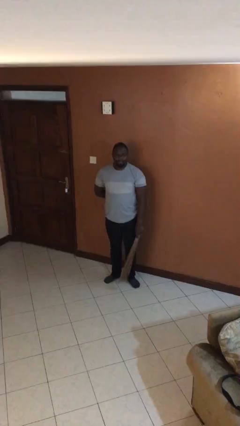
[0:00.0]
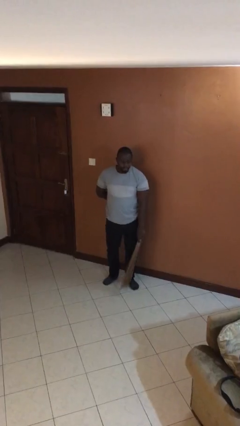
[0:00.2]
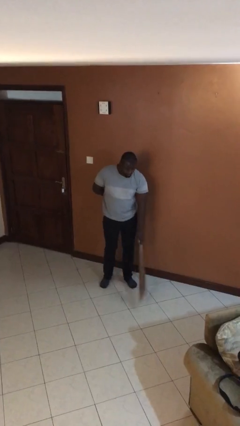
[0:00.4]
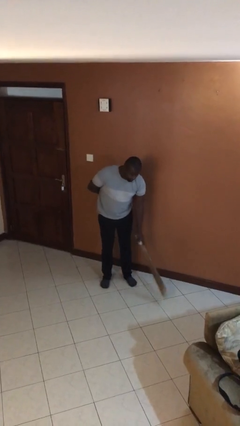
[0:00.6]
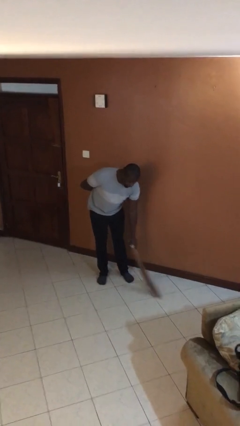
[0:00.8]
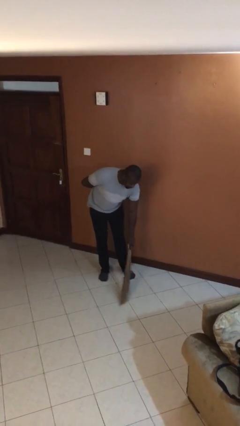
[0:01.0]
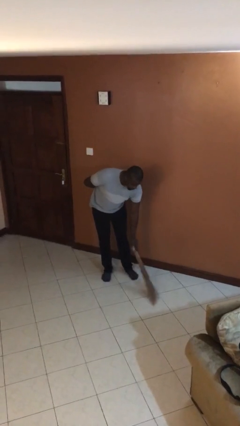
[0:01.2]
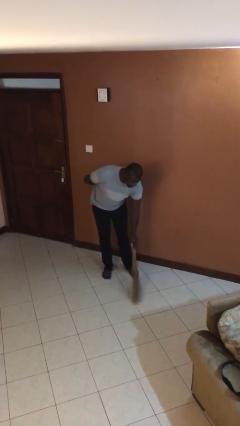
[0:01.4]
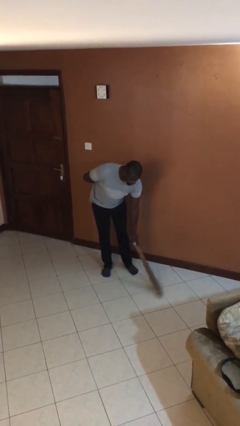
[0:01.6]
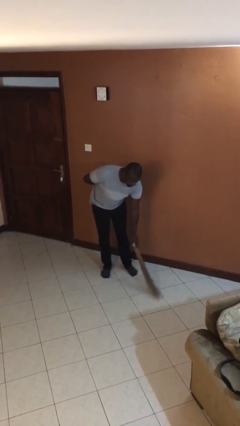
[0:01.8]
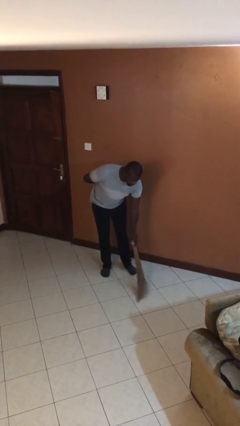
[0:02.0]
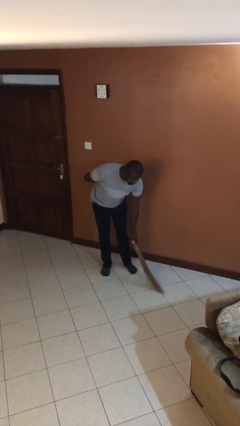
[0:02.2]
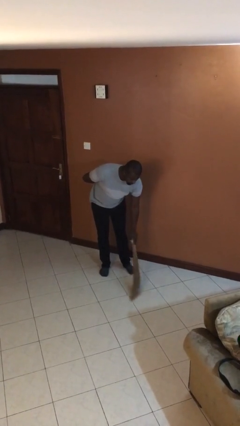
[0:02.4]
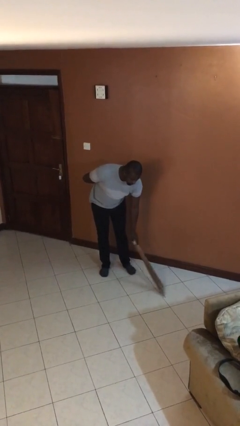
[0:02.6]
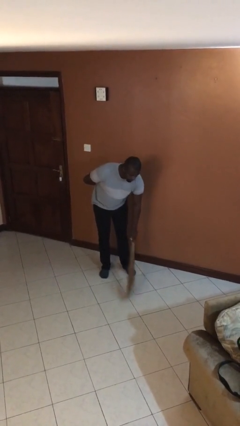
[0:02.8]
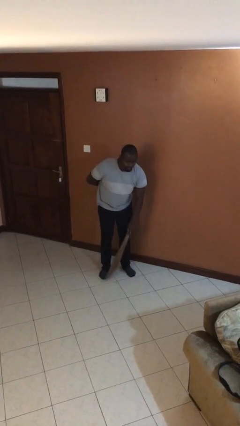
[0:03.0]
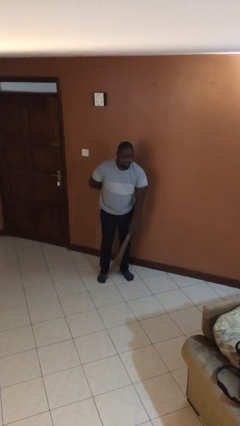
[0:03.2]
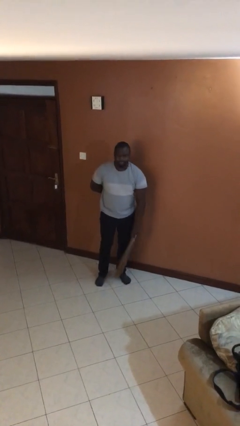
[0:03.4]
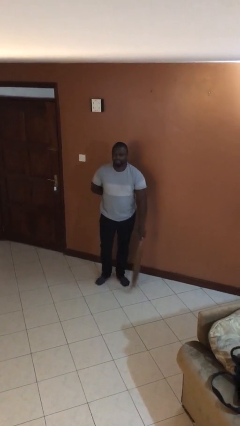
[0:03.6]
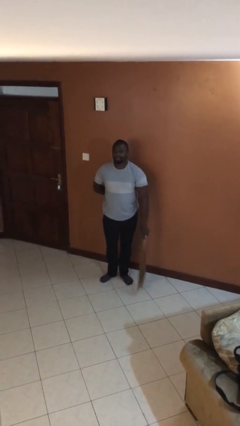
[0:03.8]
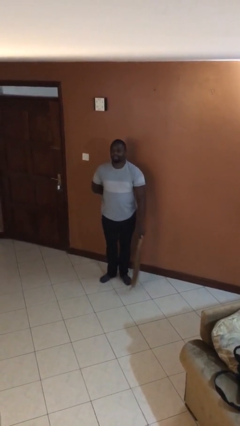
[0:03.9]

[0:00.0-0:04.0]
person sweeps floor

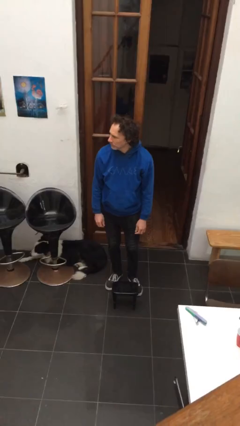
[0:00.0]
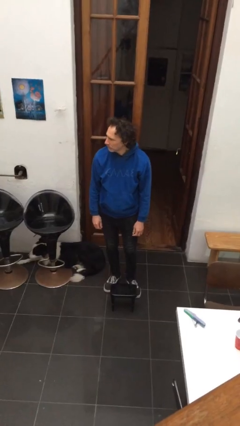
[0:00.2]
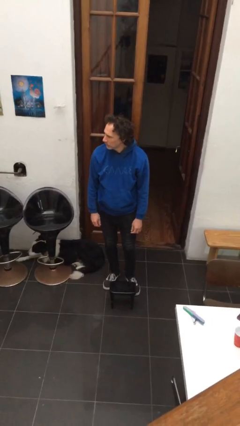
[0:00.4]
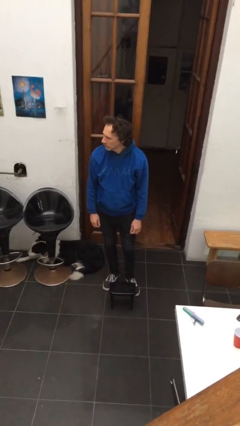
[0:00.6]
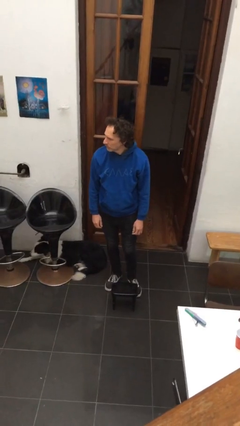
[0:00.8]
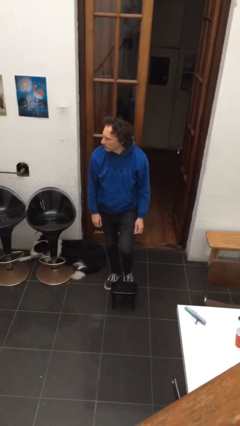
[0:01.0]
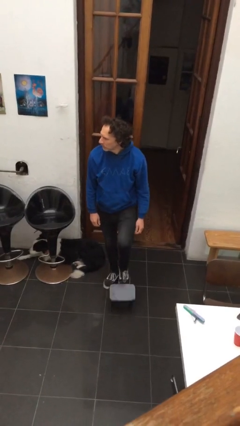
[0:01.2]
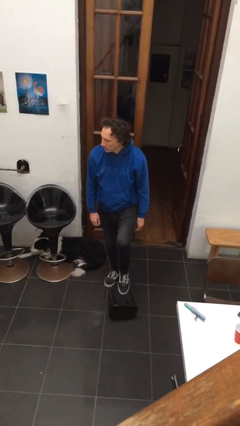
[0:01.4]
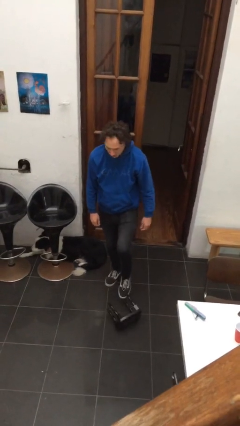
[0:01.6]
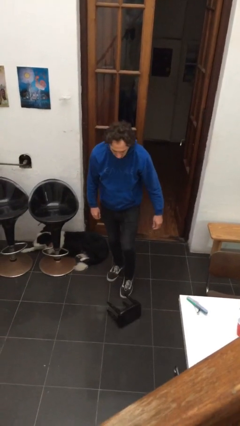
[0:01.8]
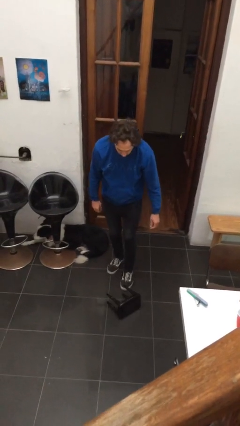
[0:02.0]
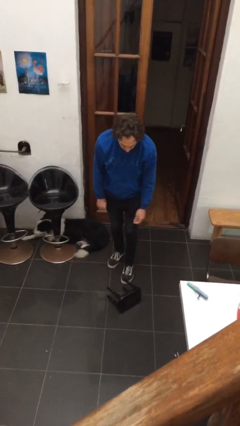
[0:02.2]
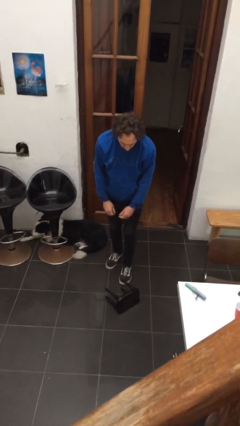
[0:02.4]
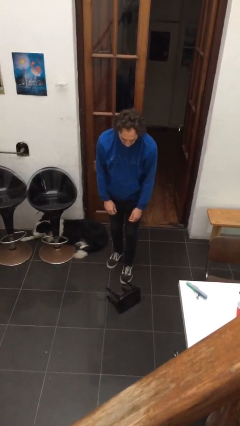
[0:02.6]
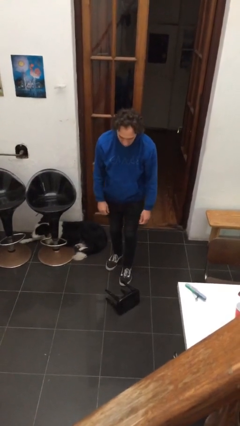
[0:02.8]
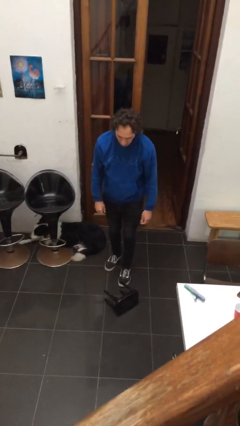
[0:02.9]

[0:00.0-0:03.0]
person knocks over furniture

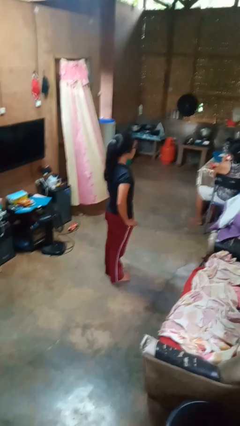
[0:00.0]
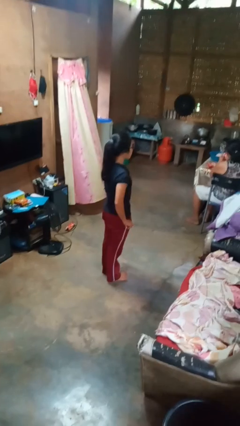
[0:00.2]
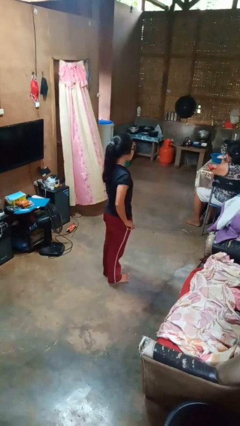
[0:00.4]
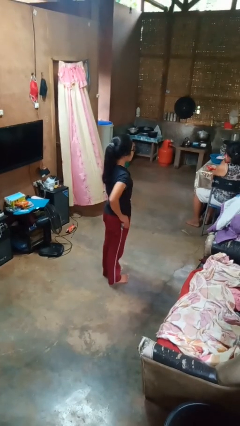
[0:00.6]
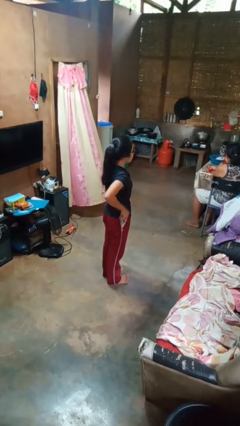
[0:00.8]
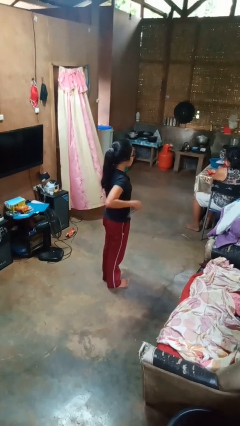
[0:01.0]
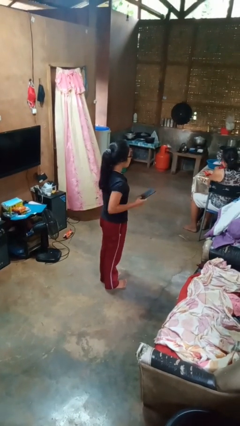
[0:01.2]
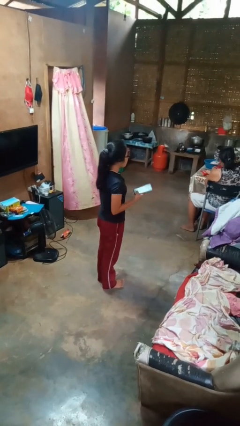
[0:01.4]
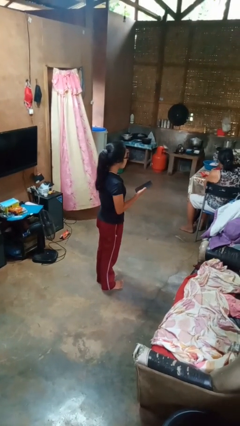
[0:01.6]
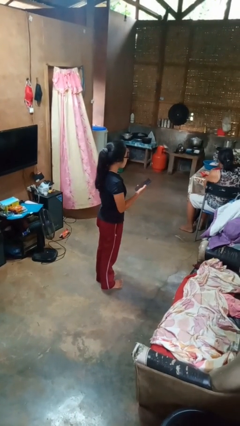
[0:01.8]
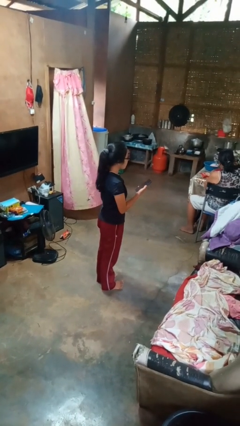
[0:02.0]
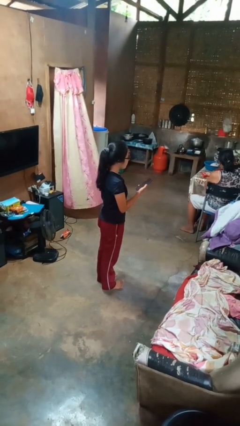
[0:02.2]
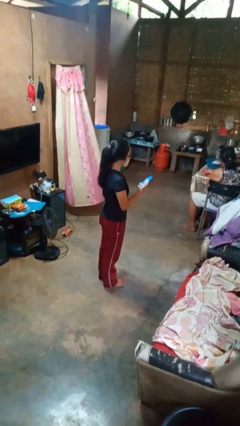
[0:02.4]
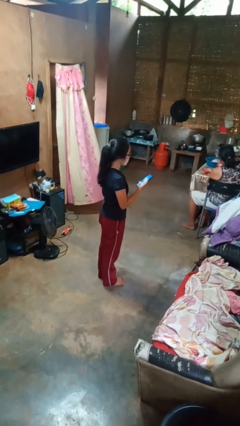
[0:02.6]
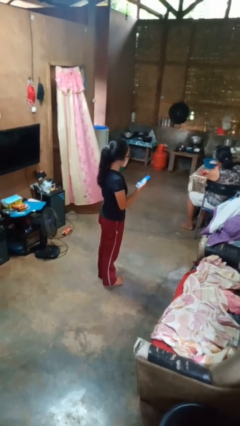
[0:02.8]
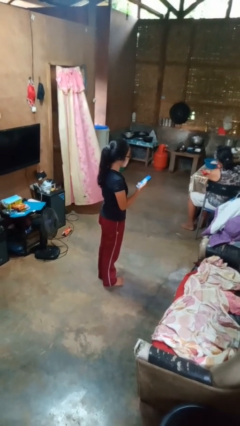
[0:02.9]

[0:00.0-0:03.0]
person takes phone from pocket

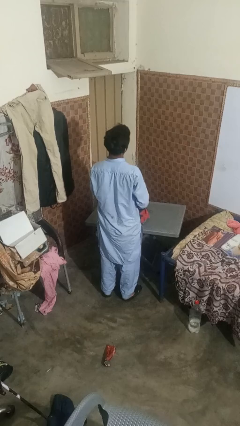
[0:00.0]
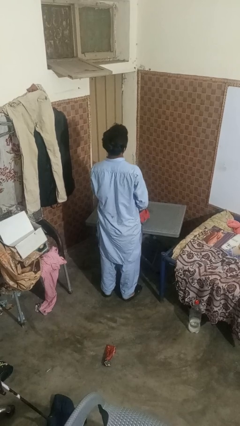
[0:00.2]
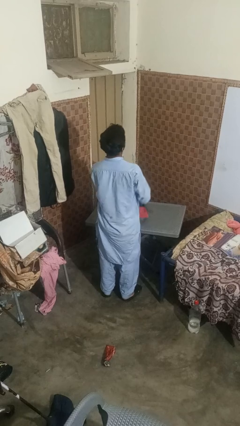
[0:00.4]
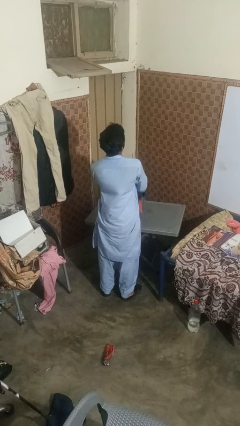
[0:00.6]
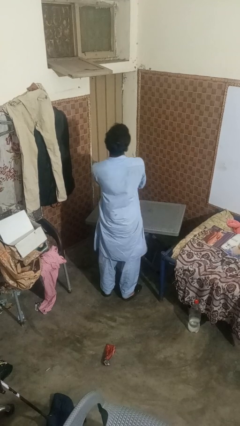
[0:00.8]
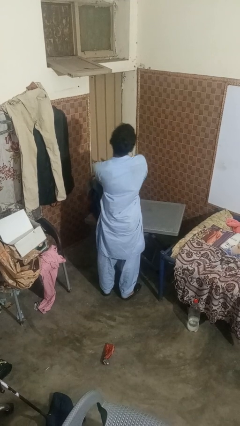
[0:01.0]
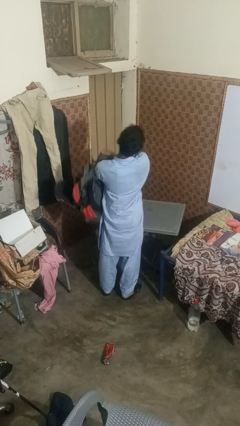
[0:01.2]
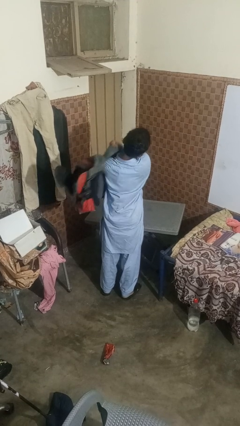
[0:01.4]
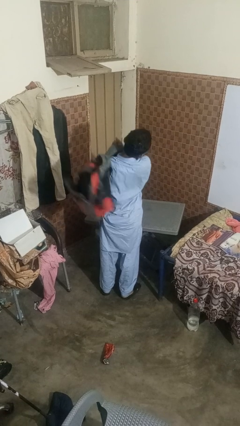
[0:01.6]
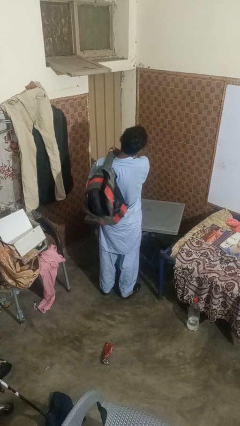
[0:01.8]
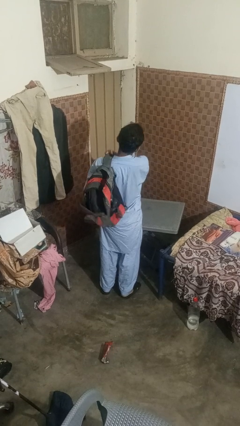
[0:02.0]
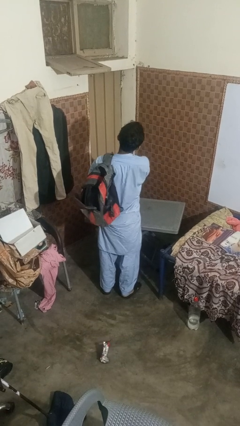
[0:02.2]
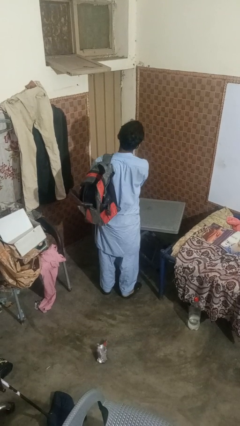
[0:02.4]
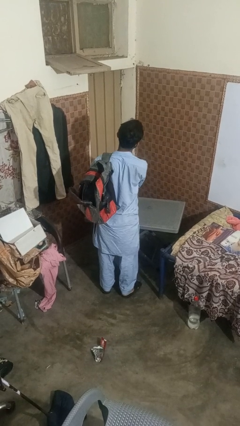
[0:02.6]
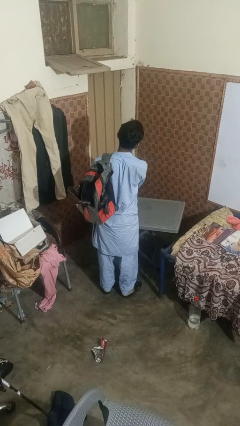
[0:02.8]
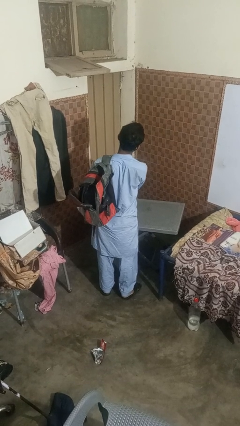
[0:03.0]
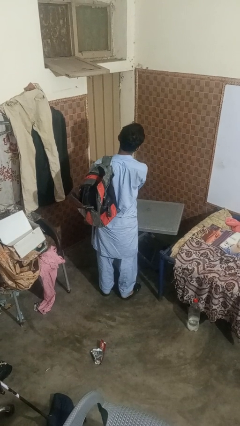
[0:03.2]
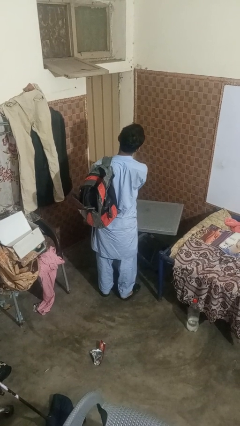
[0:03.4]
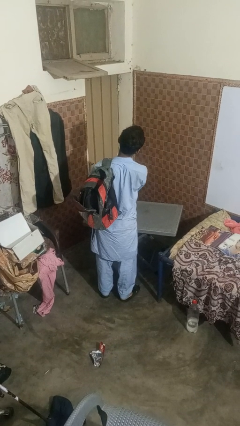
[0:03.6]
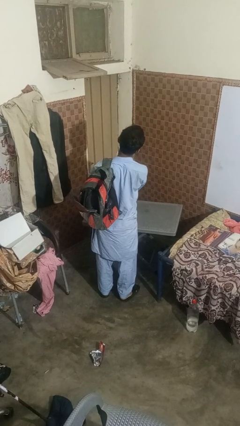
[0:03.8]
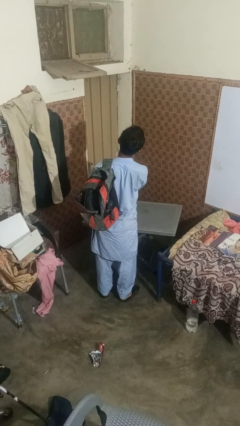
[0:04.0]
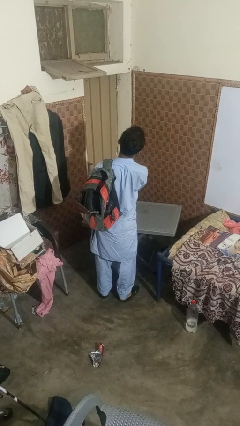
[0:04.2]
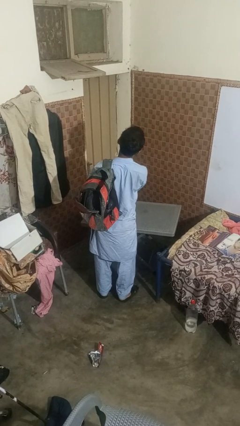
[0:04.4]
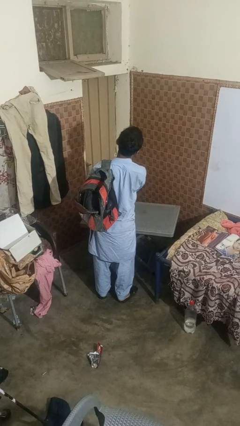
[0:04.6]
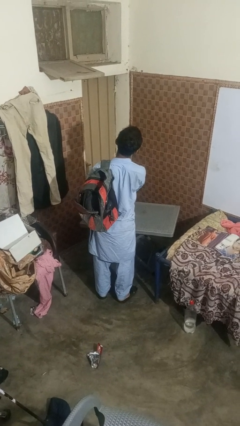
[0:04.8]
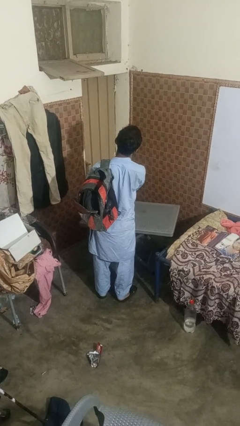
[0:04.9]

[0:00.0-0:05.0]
person puts on backpack

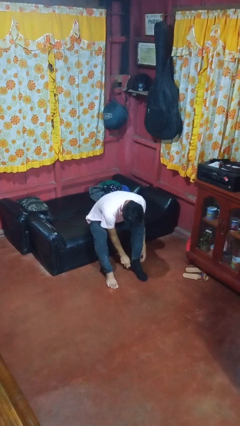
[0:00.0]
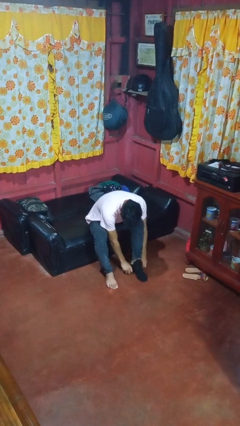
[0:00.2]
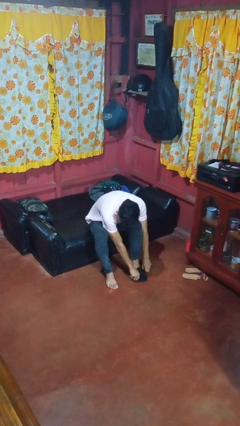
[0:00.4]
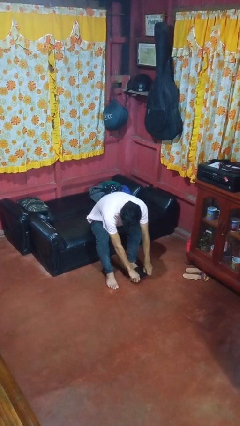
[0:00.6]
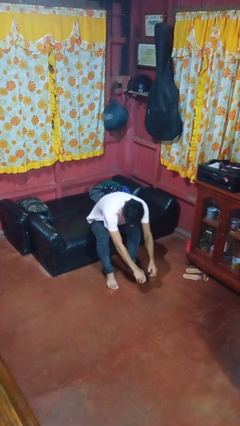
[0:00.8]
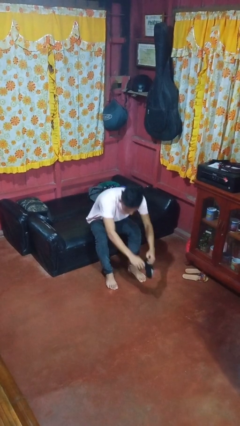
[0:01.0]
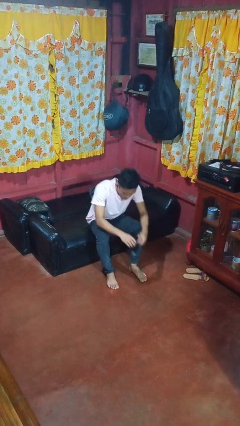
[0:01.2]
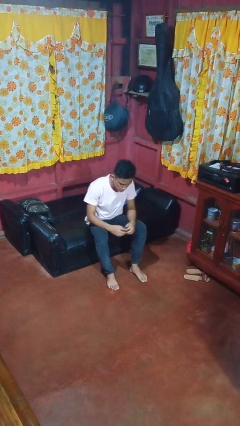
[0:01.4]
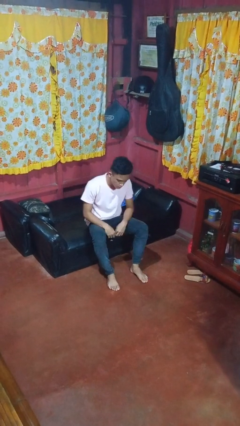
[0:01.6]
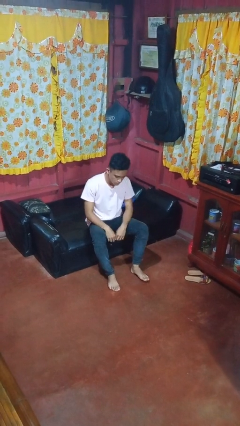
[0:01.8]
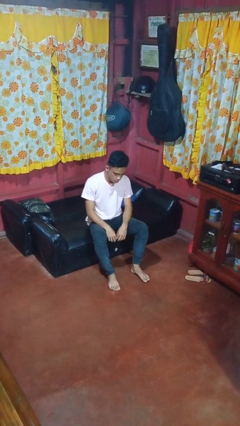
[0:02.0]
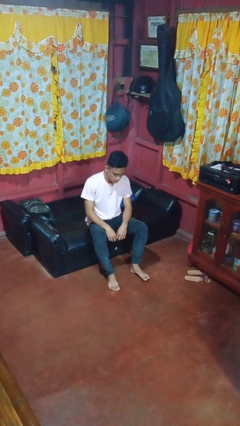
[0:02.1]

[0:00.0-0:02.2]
person takes off socks

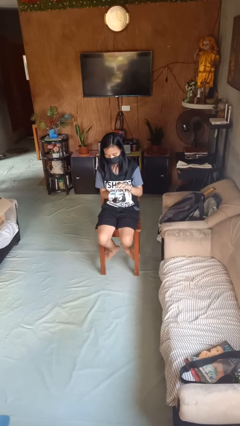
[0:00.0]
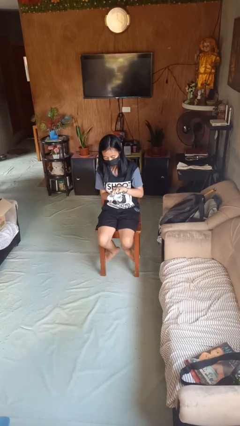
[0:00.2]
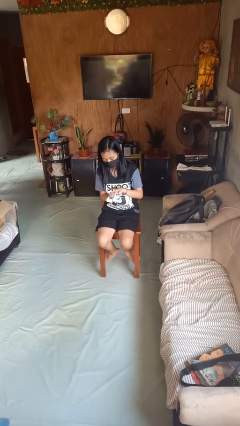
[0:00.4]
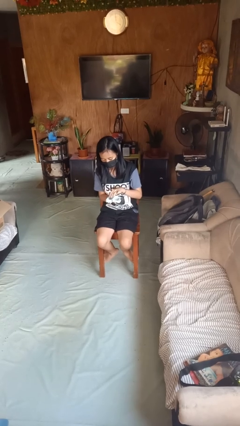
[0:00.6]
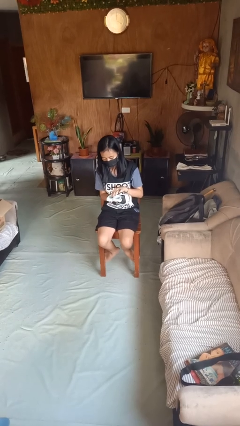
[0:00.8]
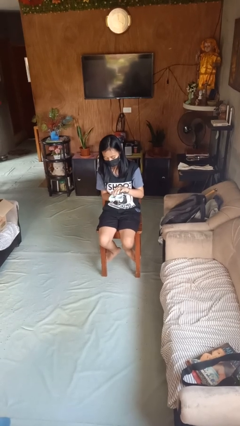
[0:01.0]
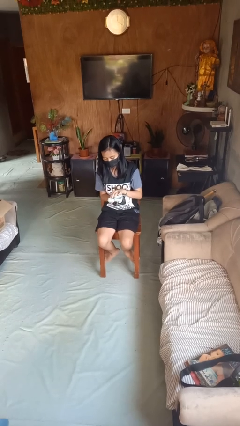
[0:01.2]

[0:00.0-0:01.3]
person searches jewelry box
